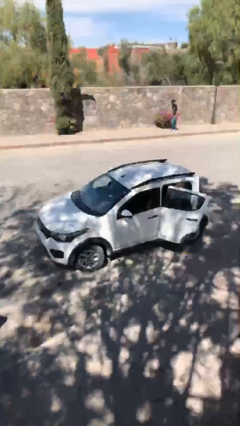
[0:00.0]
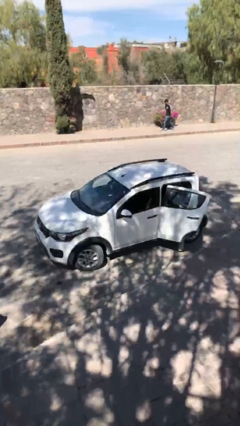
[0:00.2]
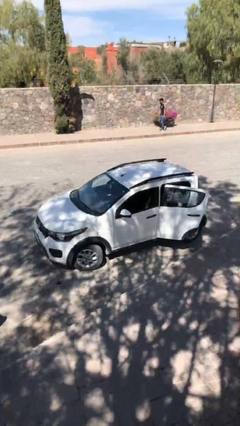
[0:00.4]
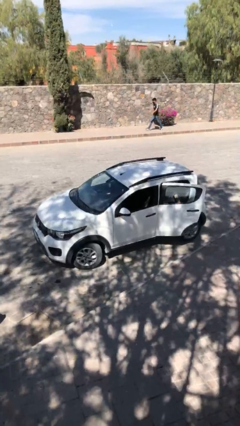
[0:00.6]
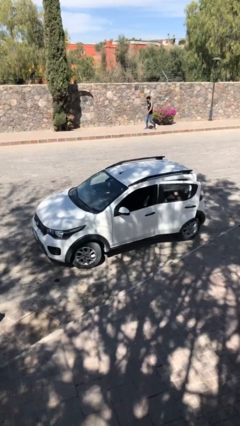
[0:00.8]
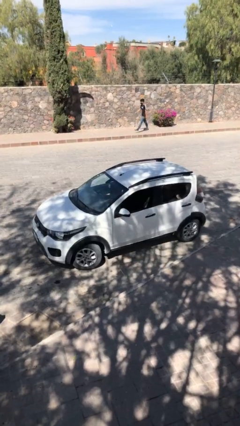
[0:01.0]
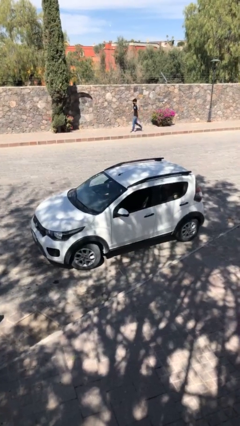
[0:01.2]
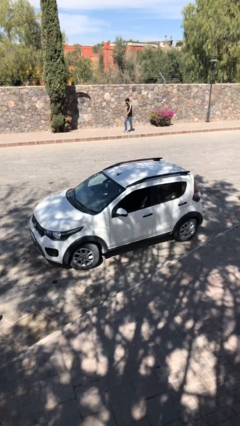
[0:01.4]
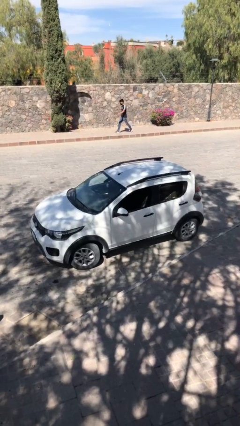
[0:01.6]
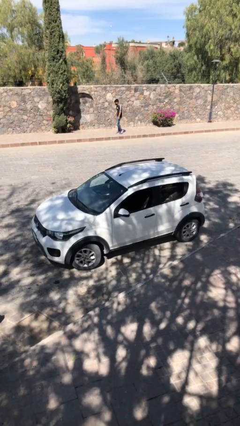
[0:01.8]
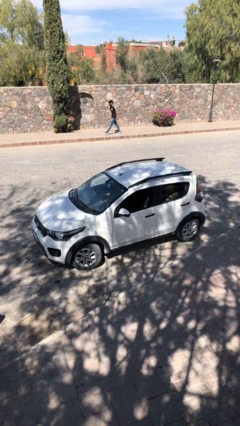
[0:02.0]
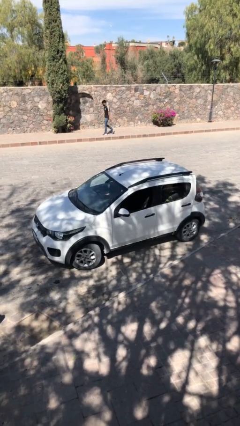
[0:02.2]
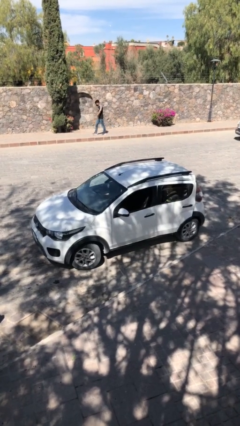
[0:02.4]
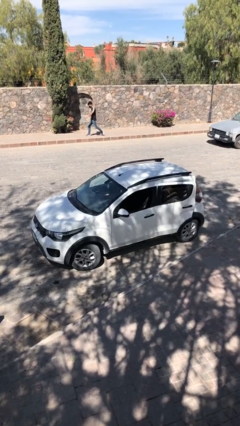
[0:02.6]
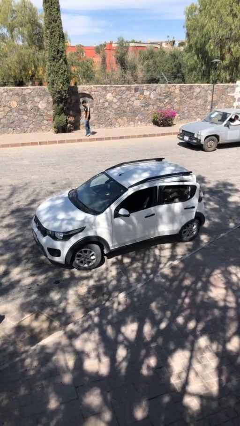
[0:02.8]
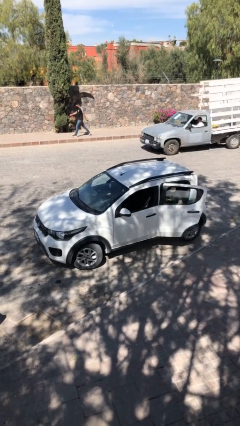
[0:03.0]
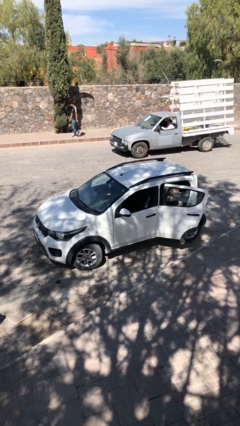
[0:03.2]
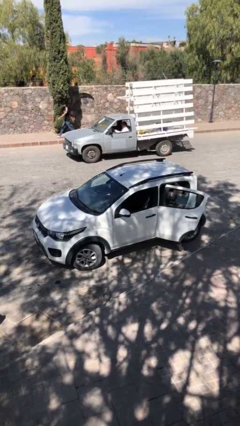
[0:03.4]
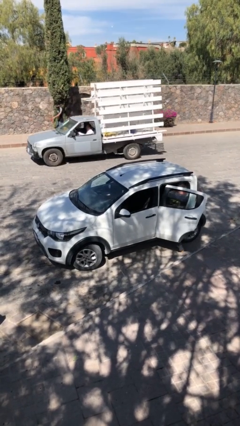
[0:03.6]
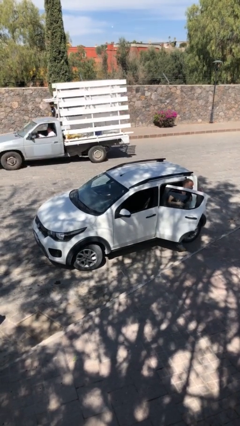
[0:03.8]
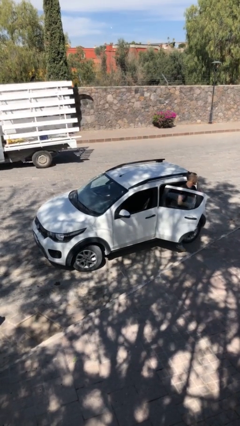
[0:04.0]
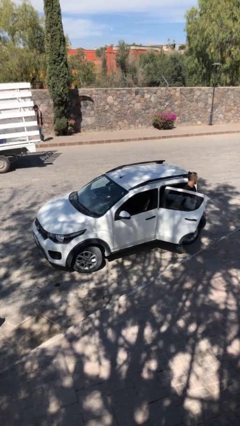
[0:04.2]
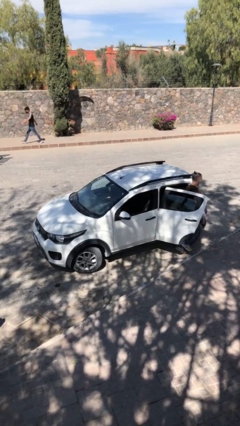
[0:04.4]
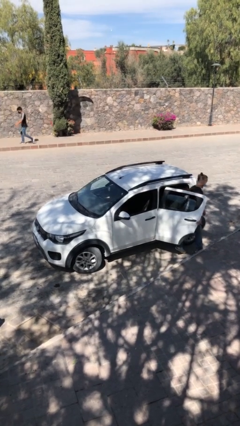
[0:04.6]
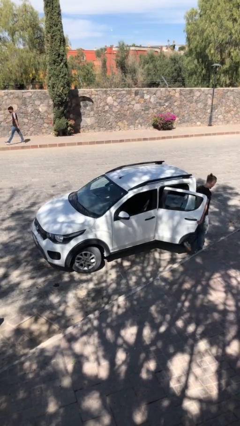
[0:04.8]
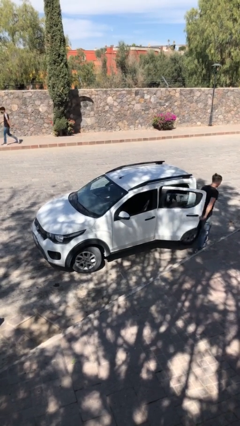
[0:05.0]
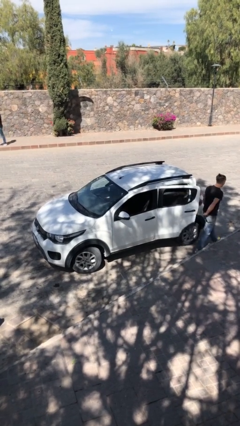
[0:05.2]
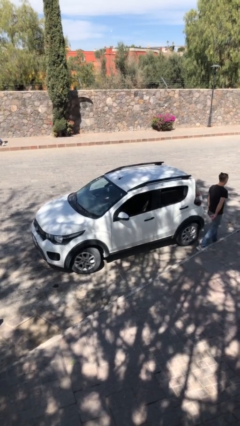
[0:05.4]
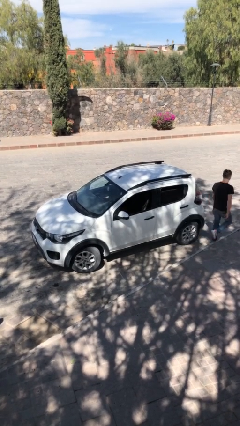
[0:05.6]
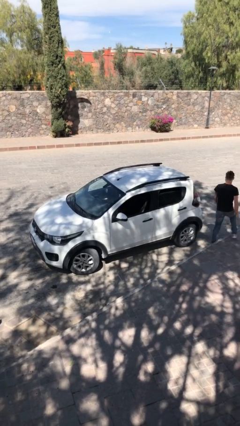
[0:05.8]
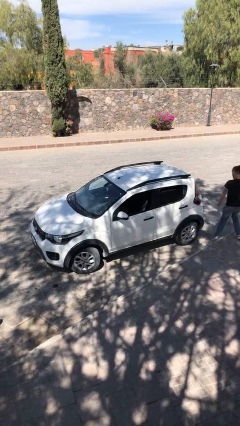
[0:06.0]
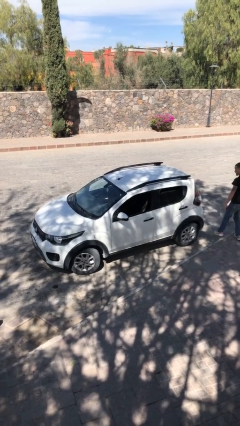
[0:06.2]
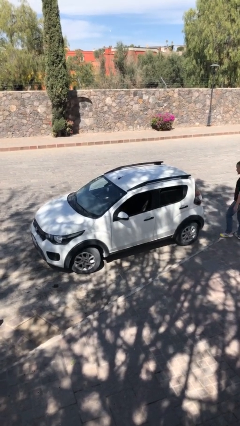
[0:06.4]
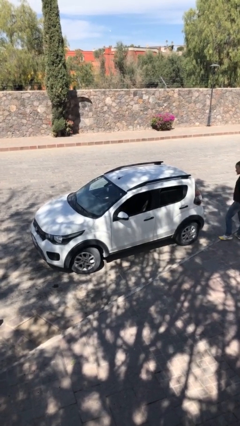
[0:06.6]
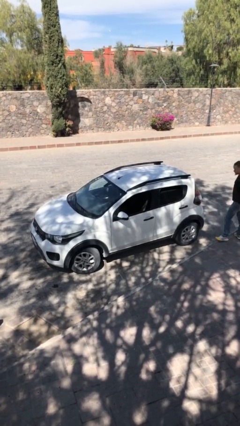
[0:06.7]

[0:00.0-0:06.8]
car picks up person

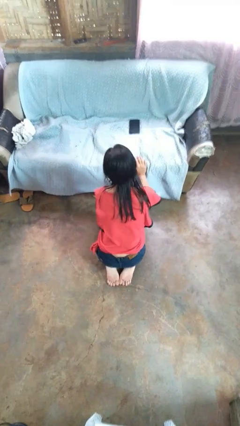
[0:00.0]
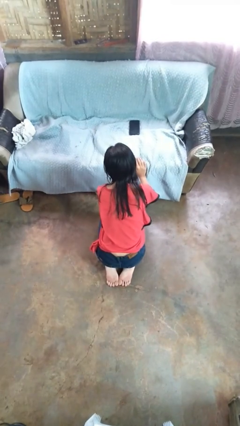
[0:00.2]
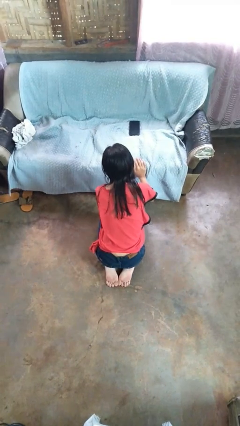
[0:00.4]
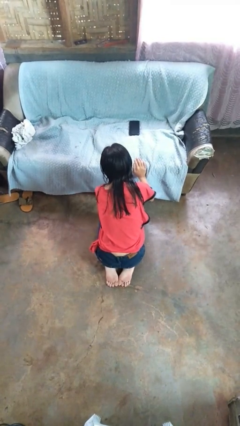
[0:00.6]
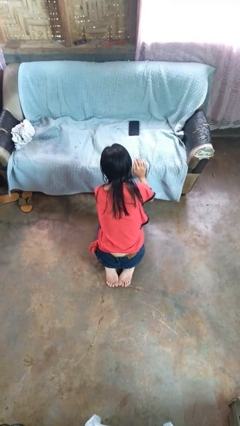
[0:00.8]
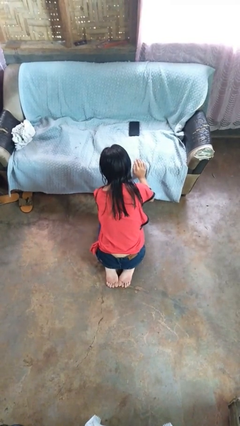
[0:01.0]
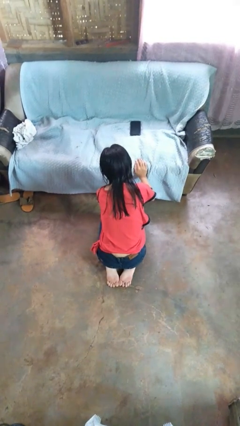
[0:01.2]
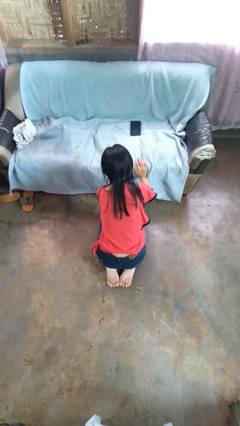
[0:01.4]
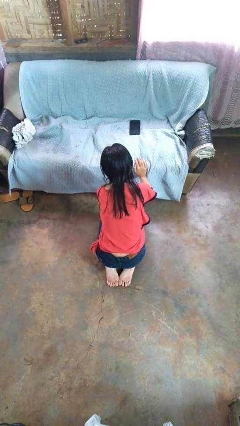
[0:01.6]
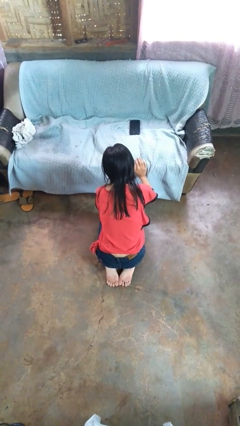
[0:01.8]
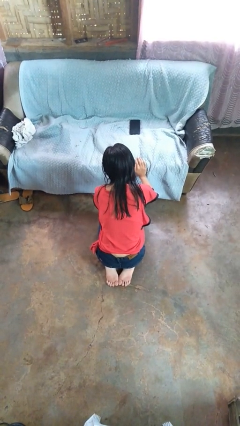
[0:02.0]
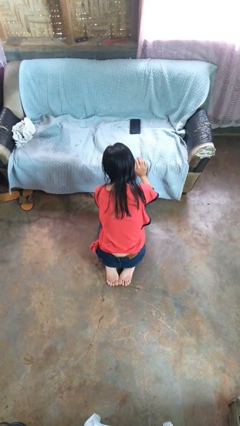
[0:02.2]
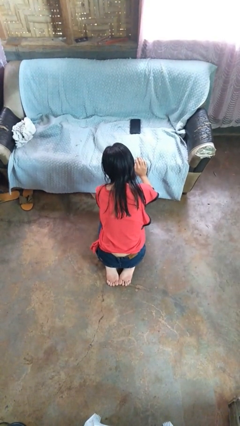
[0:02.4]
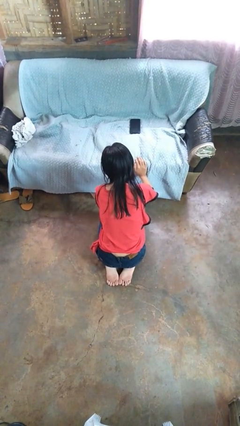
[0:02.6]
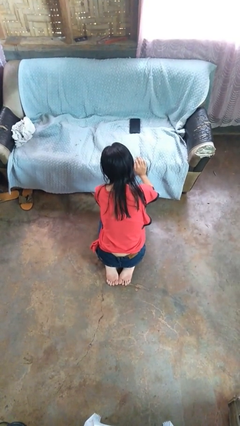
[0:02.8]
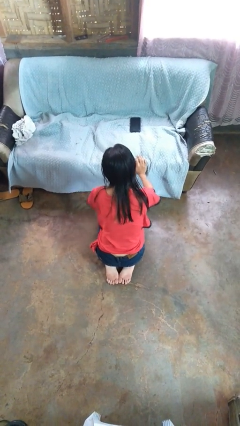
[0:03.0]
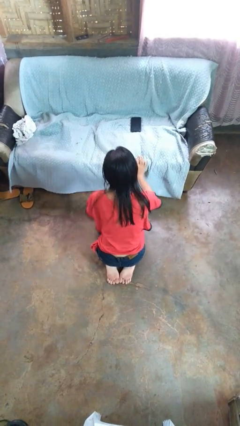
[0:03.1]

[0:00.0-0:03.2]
person searches under couch

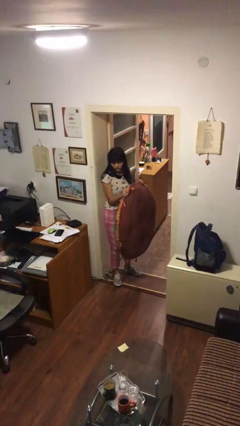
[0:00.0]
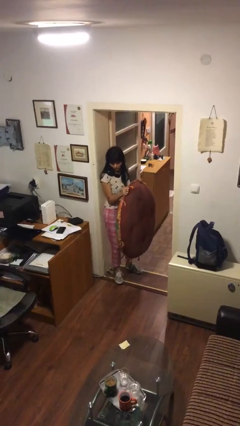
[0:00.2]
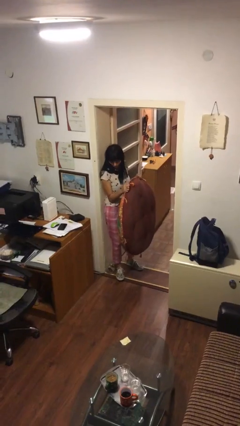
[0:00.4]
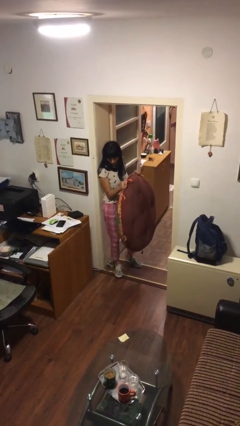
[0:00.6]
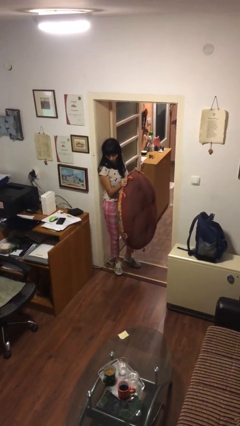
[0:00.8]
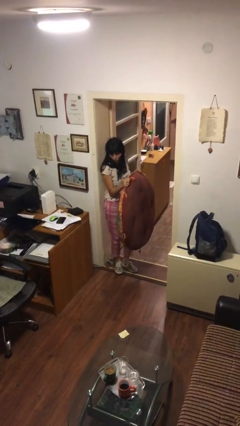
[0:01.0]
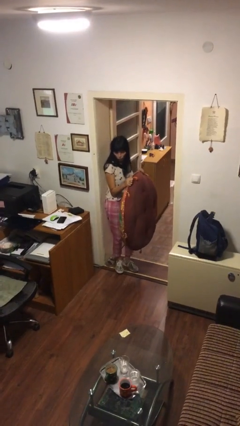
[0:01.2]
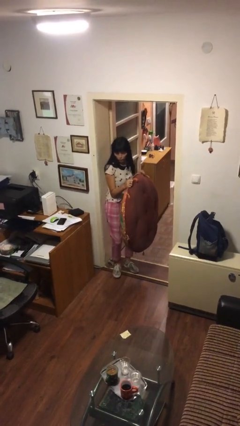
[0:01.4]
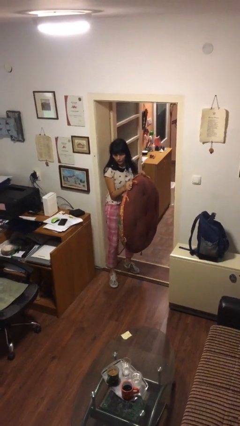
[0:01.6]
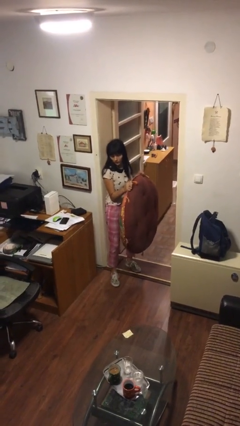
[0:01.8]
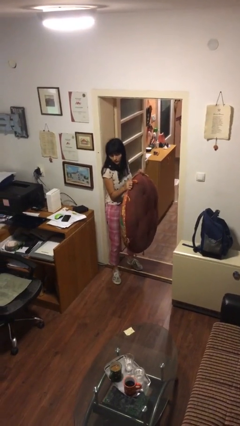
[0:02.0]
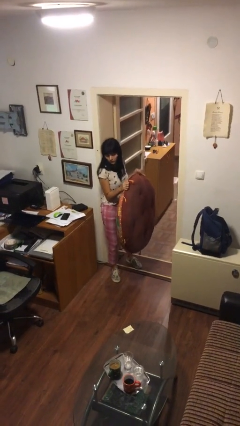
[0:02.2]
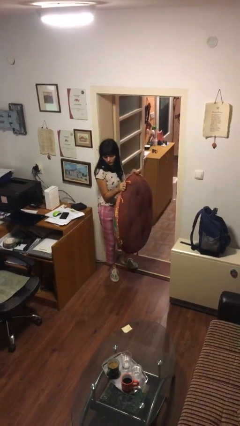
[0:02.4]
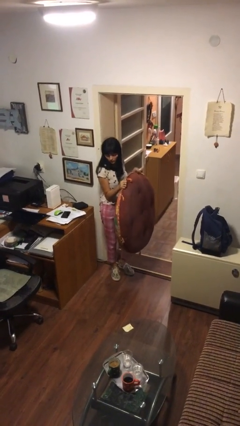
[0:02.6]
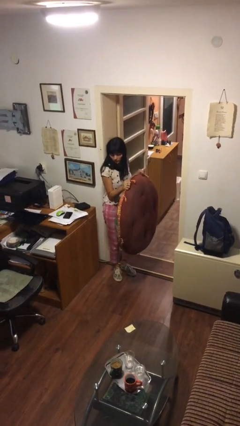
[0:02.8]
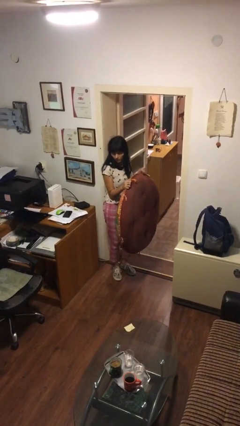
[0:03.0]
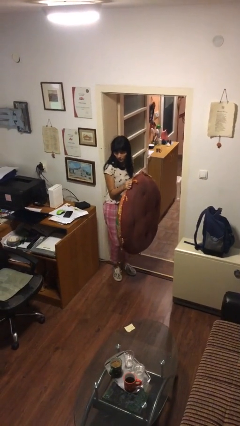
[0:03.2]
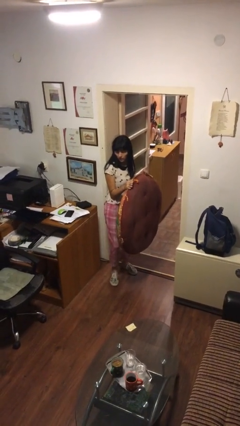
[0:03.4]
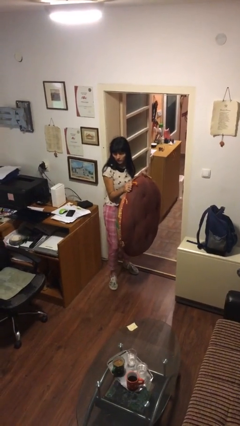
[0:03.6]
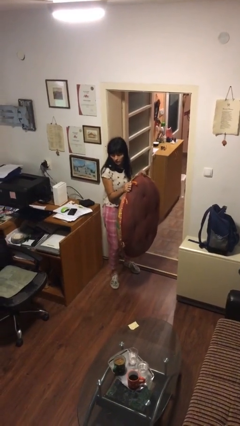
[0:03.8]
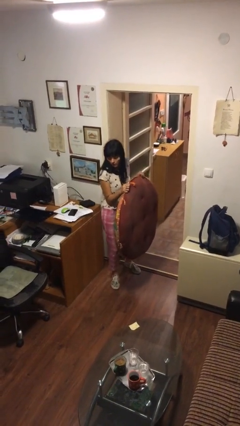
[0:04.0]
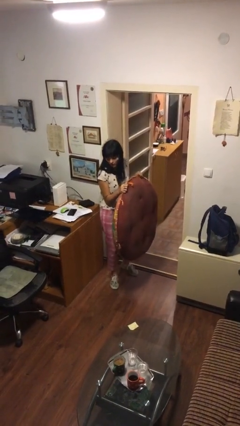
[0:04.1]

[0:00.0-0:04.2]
person carries heavy object

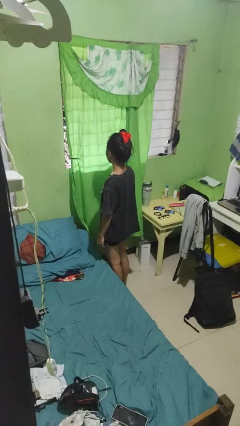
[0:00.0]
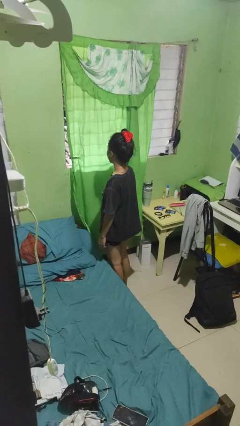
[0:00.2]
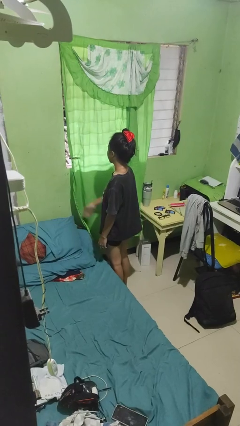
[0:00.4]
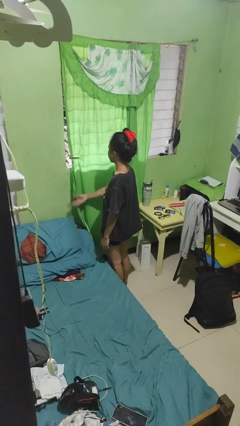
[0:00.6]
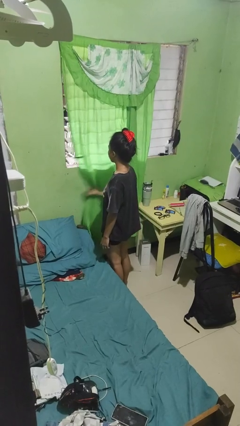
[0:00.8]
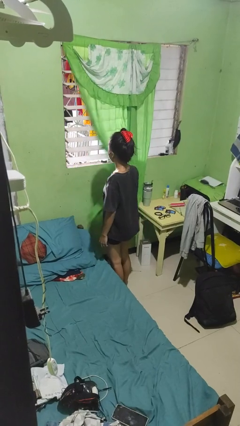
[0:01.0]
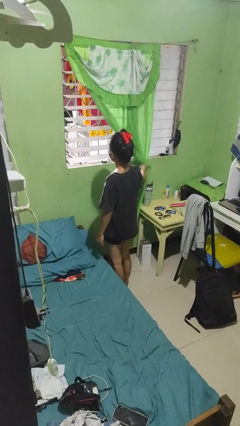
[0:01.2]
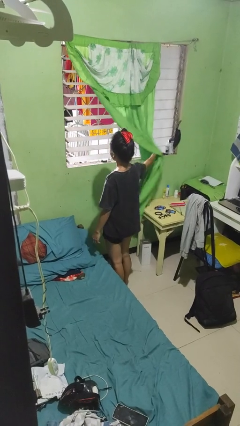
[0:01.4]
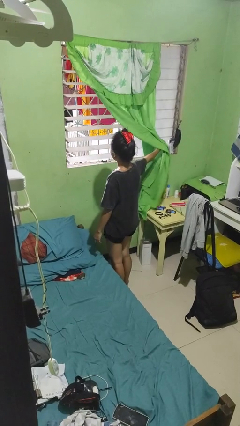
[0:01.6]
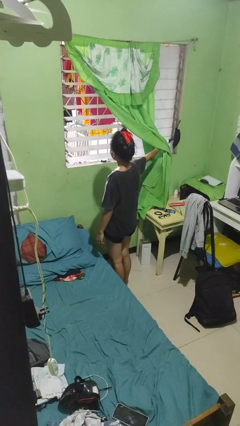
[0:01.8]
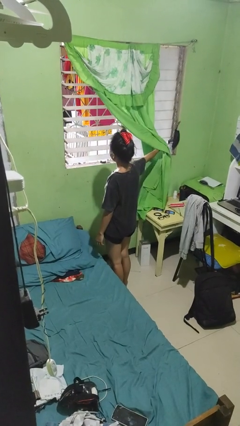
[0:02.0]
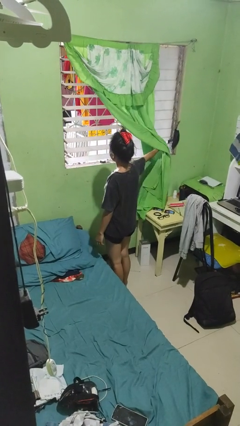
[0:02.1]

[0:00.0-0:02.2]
person opens curtains

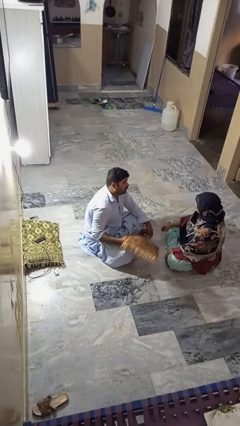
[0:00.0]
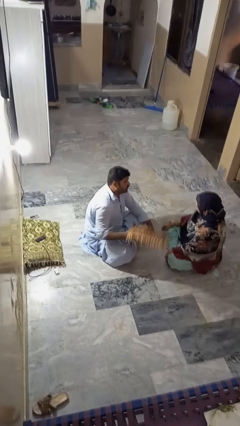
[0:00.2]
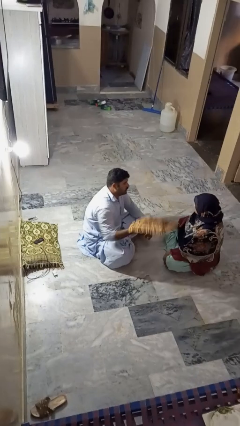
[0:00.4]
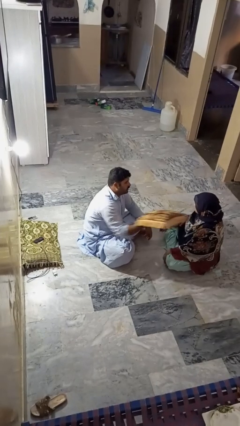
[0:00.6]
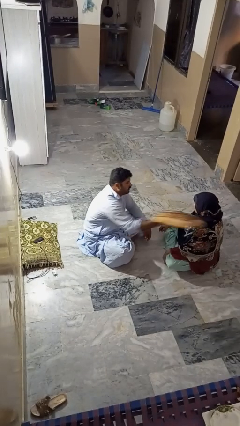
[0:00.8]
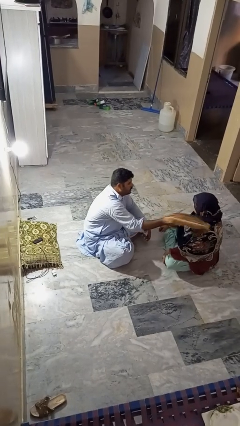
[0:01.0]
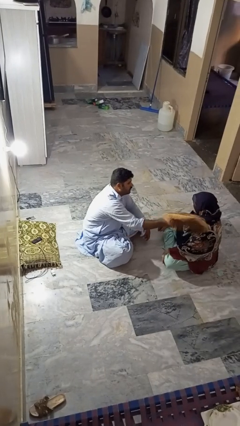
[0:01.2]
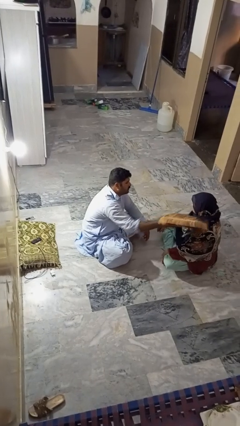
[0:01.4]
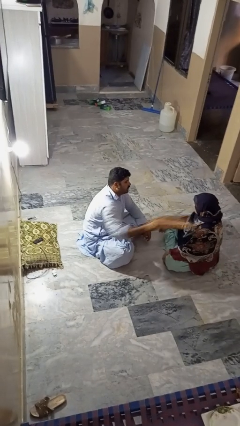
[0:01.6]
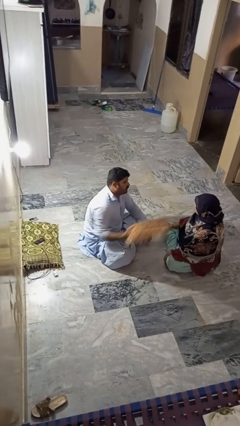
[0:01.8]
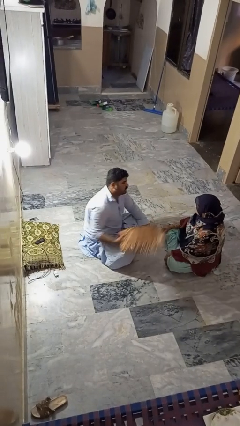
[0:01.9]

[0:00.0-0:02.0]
person hits person with pillow
